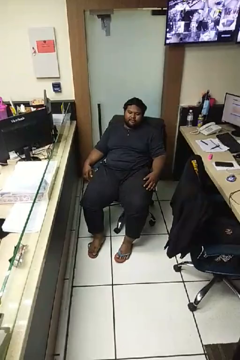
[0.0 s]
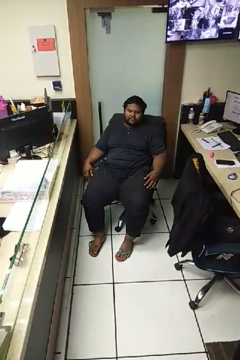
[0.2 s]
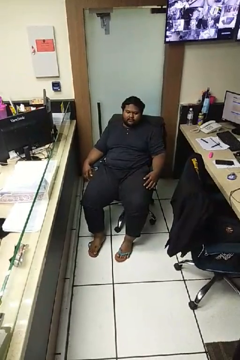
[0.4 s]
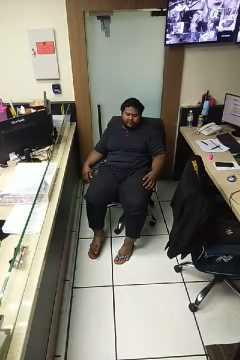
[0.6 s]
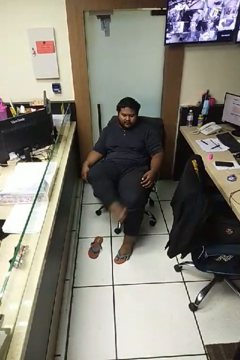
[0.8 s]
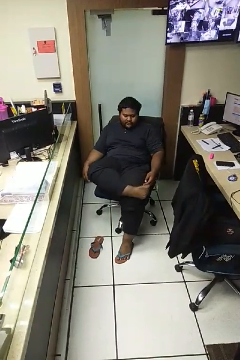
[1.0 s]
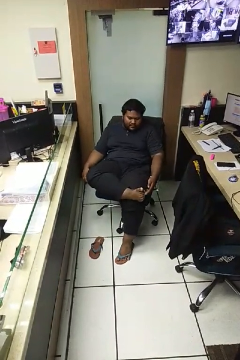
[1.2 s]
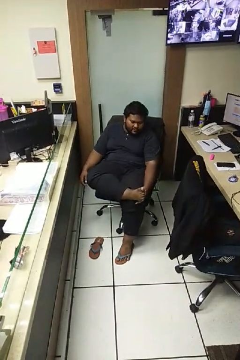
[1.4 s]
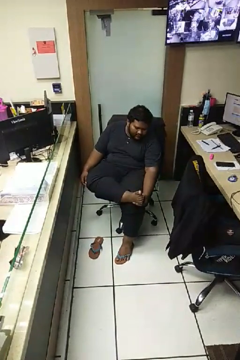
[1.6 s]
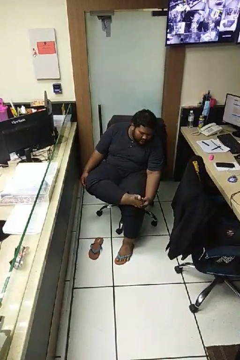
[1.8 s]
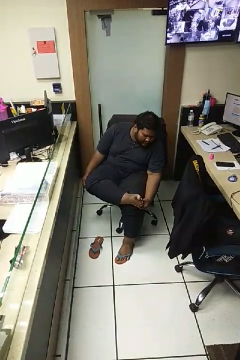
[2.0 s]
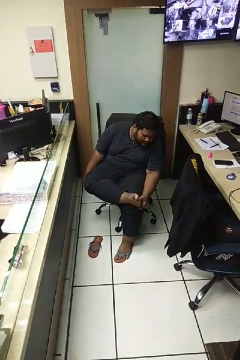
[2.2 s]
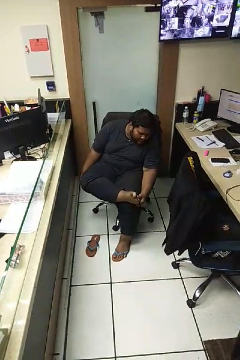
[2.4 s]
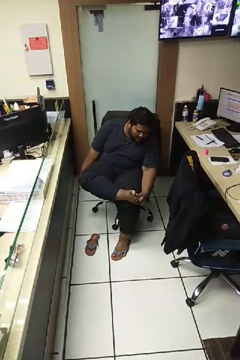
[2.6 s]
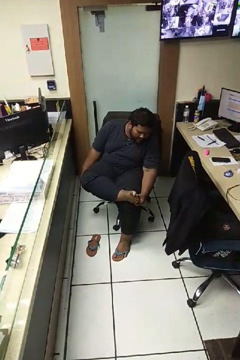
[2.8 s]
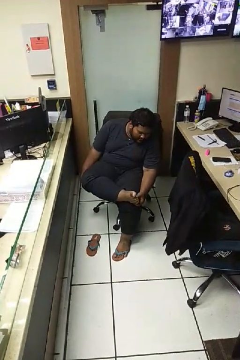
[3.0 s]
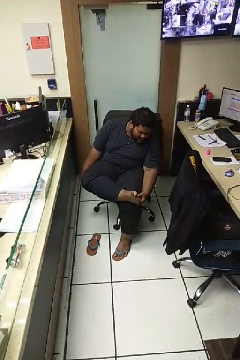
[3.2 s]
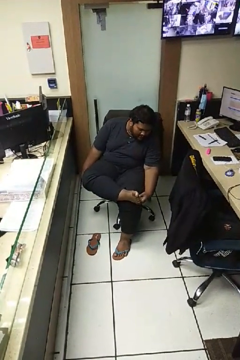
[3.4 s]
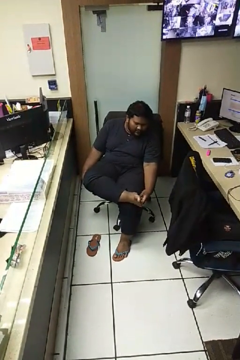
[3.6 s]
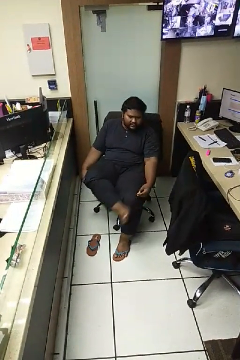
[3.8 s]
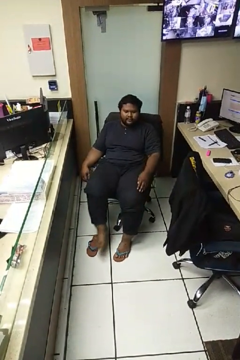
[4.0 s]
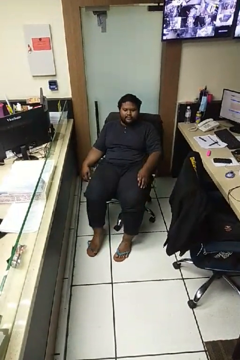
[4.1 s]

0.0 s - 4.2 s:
person rubs foot

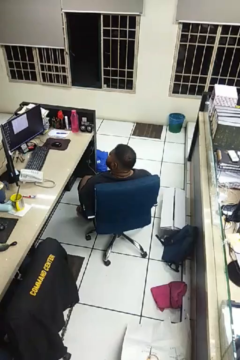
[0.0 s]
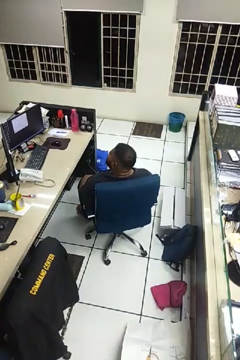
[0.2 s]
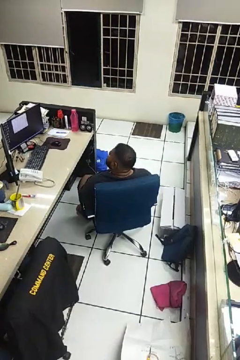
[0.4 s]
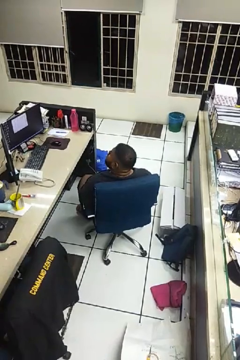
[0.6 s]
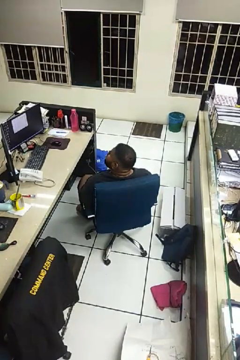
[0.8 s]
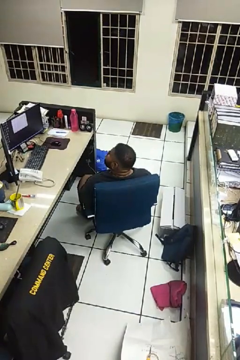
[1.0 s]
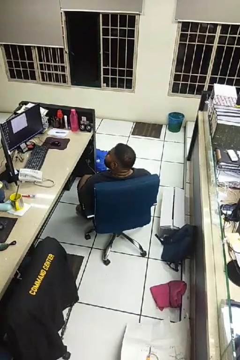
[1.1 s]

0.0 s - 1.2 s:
person sticks out tongue

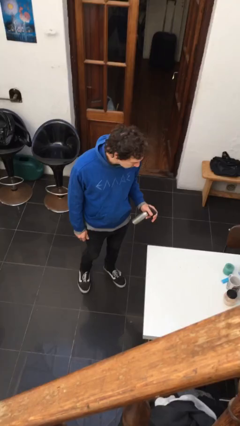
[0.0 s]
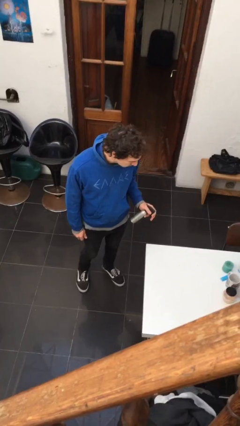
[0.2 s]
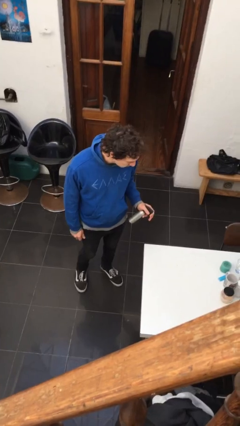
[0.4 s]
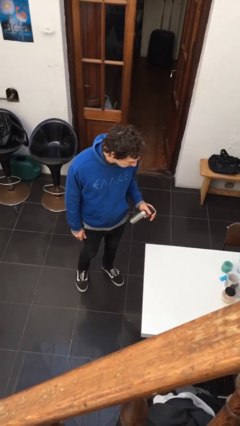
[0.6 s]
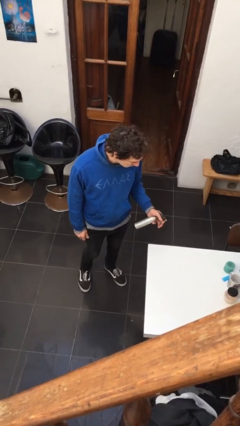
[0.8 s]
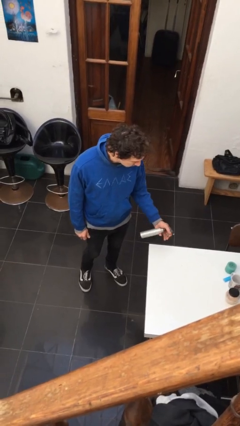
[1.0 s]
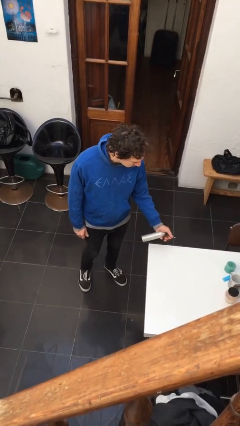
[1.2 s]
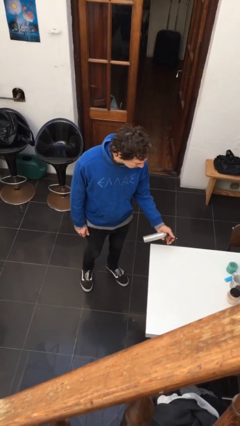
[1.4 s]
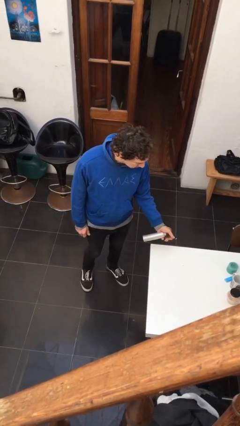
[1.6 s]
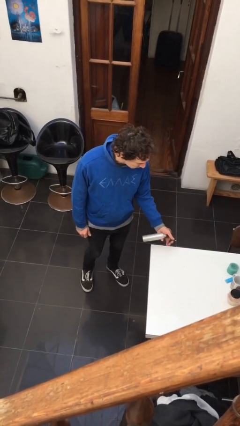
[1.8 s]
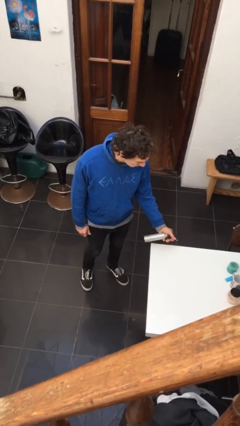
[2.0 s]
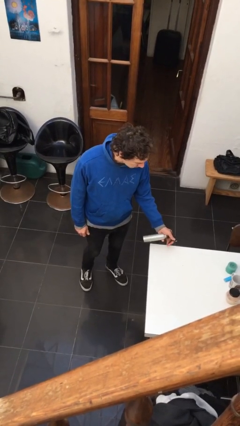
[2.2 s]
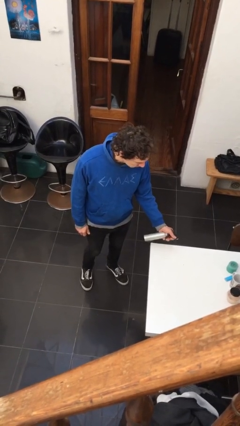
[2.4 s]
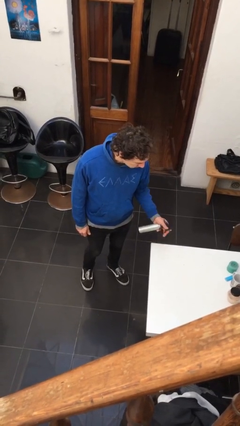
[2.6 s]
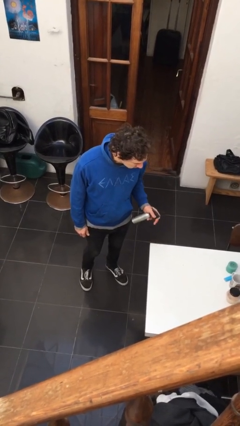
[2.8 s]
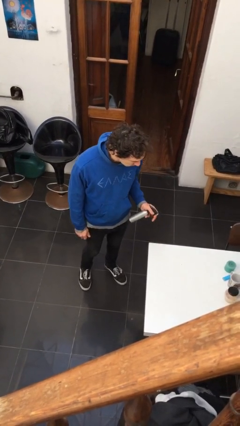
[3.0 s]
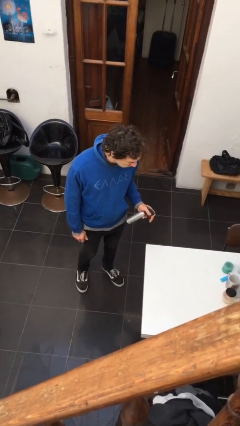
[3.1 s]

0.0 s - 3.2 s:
person sprays from bottle

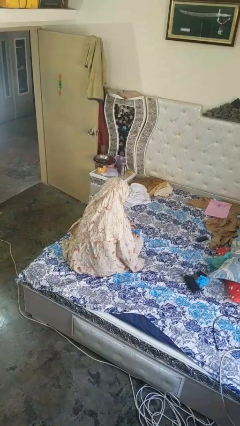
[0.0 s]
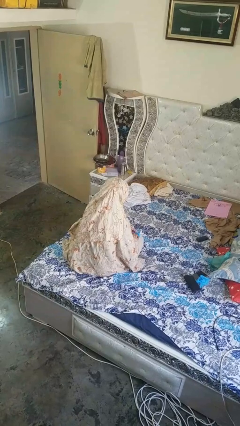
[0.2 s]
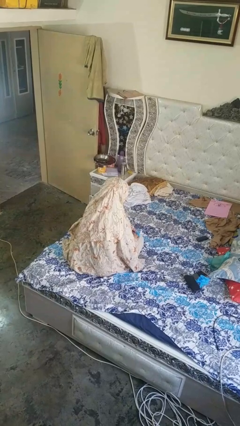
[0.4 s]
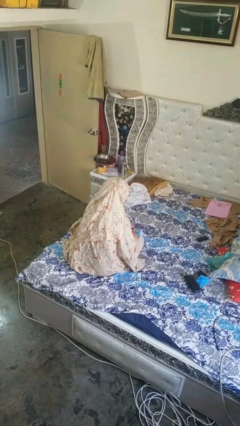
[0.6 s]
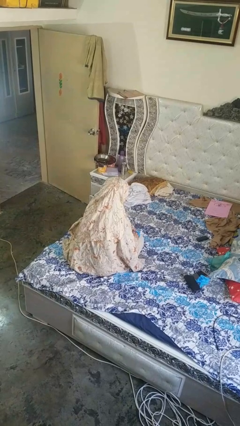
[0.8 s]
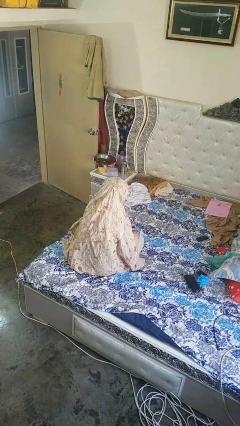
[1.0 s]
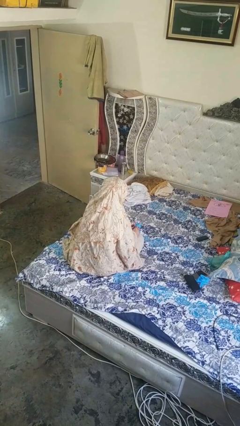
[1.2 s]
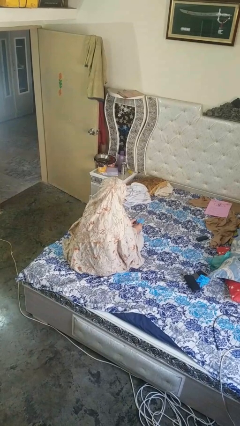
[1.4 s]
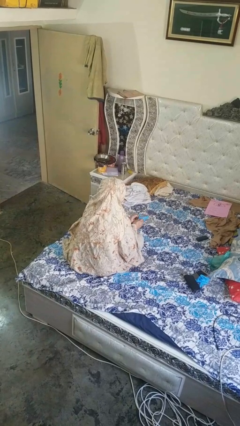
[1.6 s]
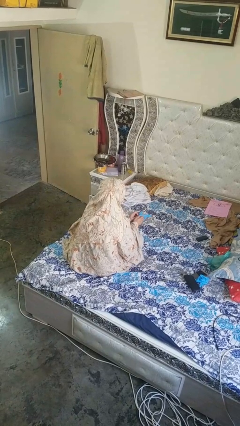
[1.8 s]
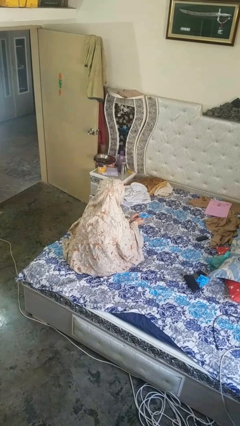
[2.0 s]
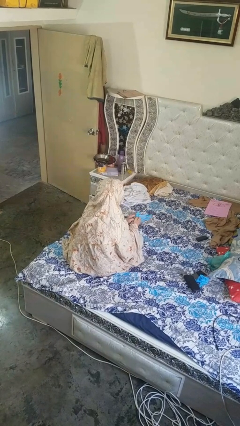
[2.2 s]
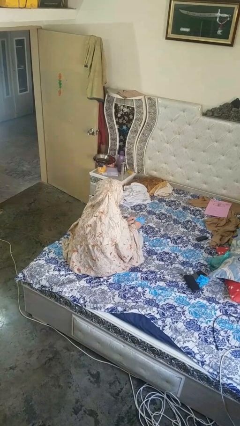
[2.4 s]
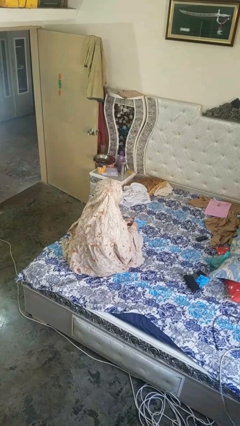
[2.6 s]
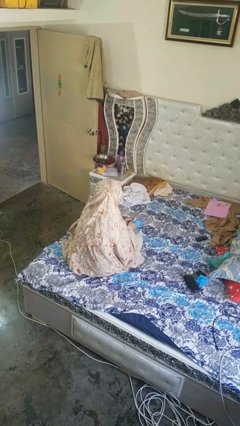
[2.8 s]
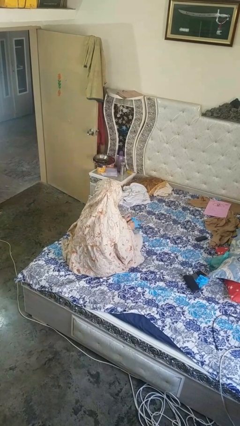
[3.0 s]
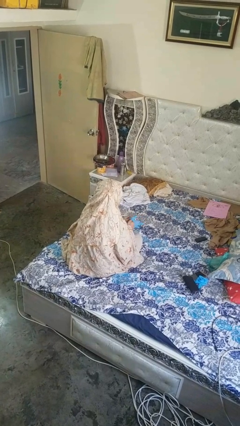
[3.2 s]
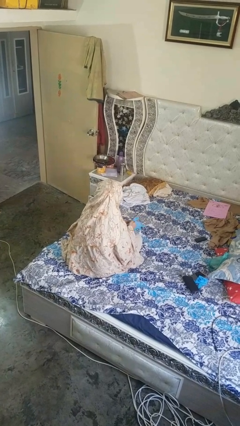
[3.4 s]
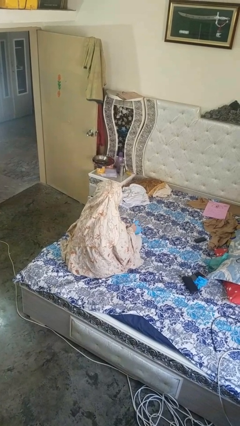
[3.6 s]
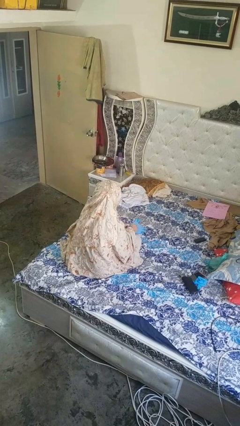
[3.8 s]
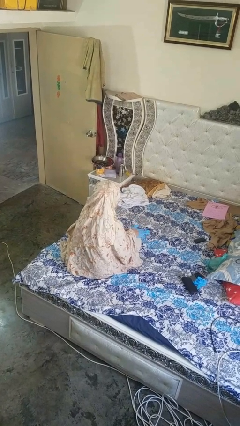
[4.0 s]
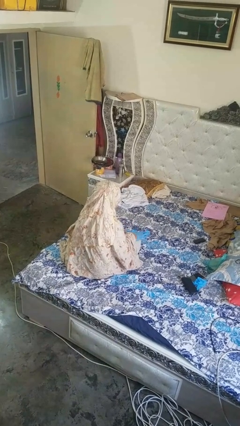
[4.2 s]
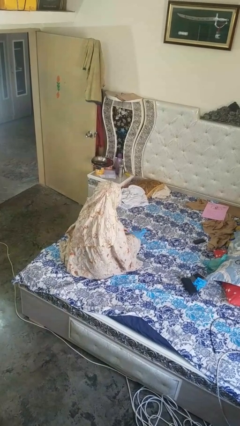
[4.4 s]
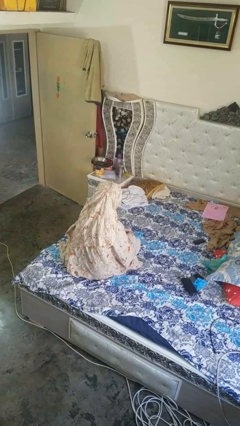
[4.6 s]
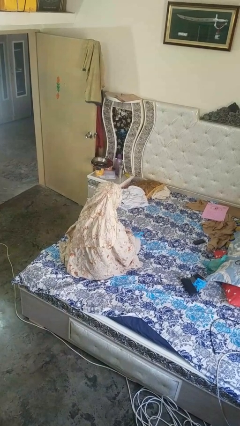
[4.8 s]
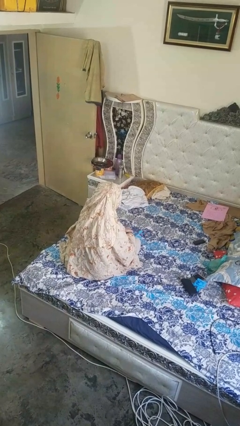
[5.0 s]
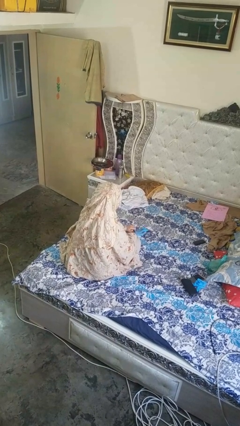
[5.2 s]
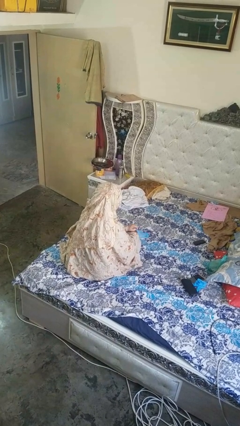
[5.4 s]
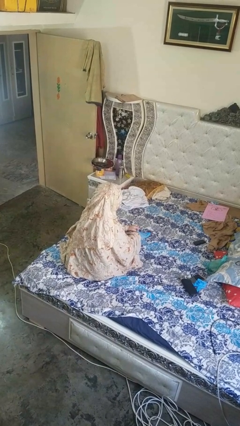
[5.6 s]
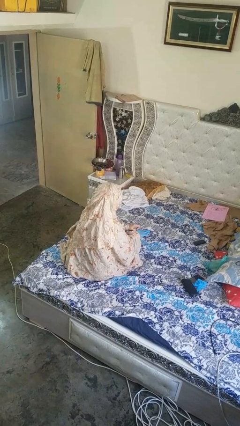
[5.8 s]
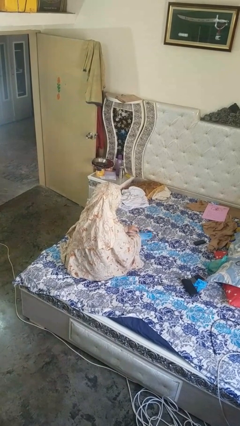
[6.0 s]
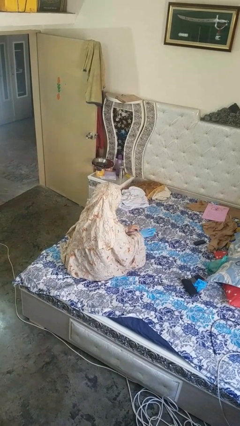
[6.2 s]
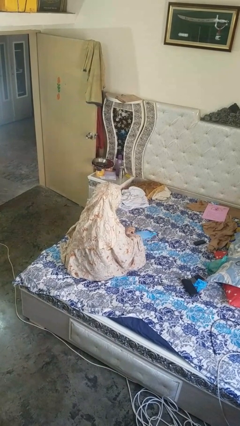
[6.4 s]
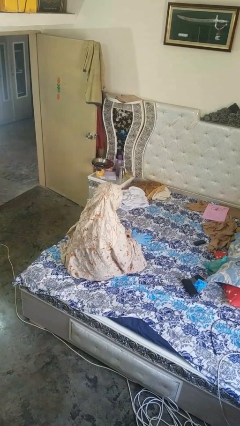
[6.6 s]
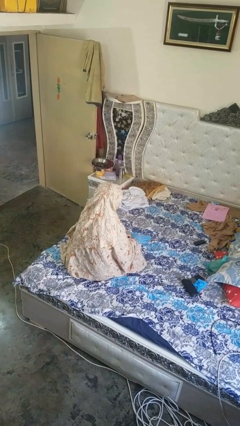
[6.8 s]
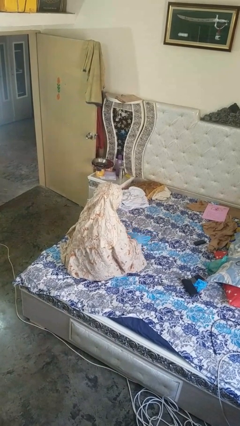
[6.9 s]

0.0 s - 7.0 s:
person puts on gloves

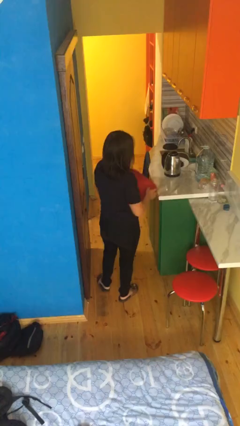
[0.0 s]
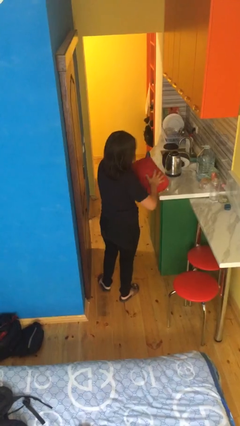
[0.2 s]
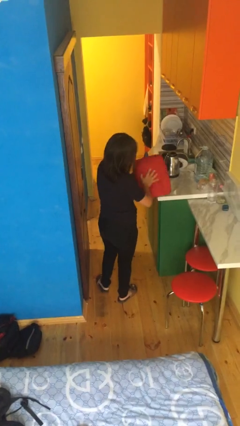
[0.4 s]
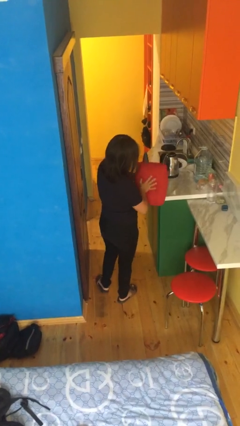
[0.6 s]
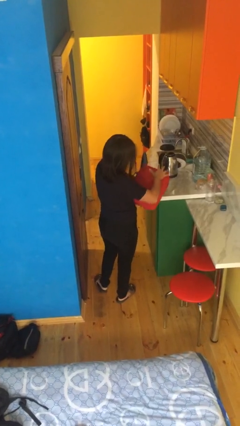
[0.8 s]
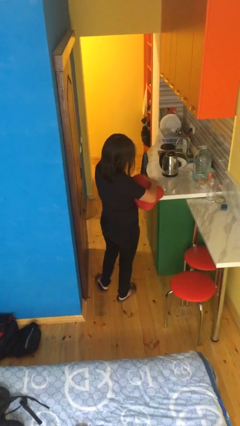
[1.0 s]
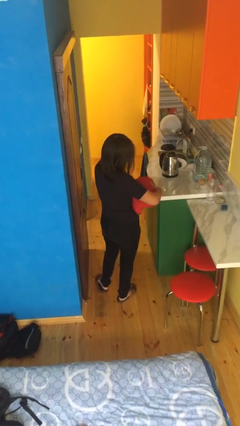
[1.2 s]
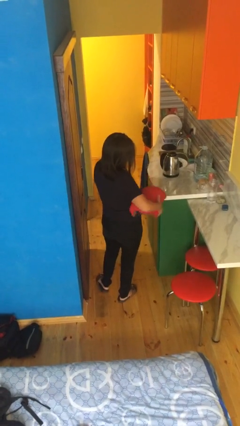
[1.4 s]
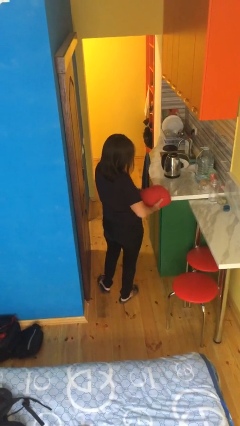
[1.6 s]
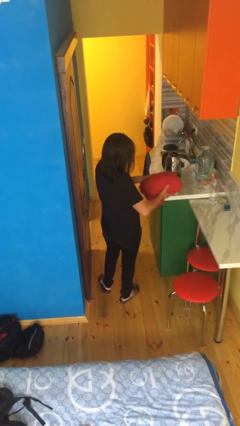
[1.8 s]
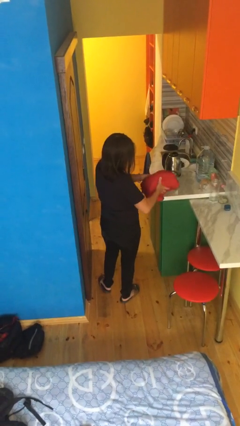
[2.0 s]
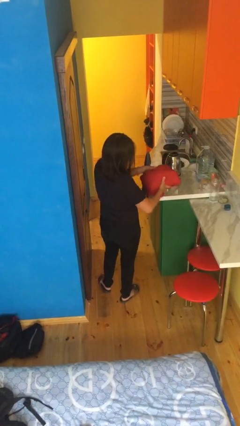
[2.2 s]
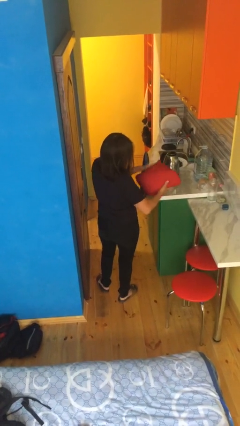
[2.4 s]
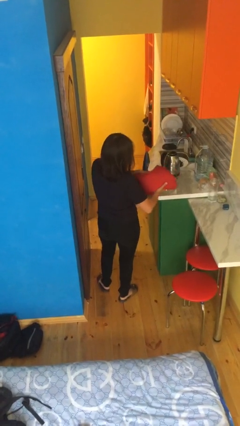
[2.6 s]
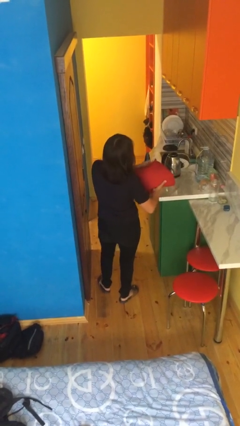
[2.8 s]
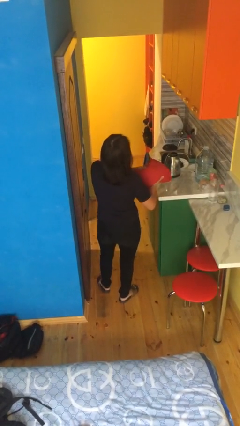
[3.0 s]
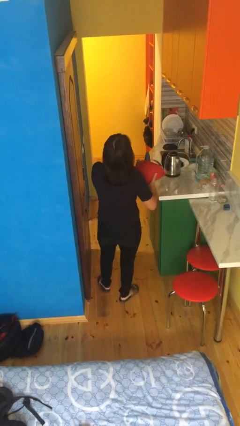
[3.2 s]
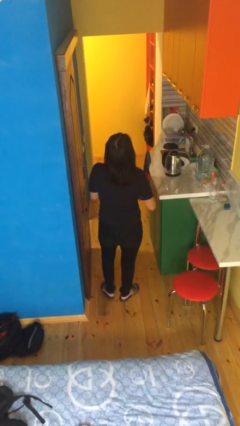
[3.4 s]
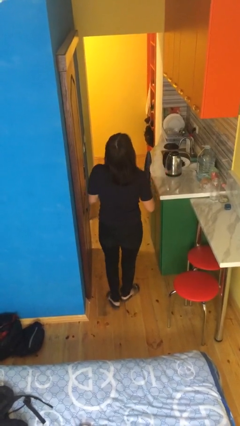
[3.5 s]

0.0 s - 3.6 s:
person squeezes object
